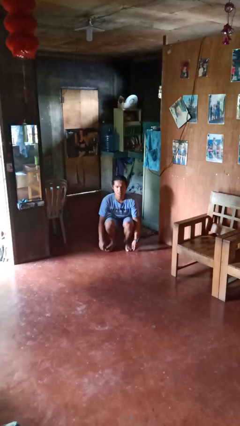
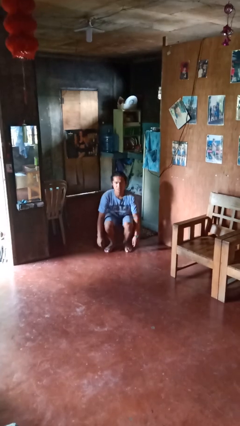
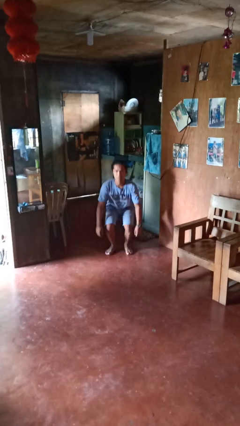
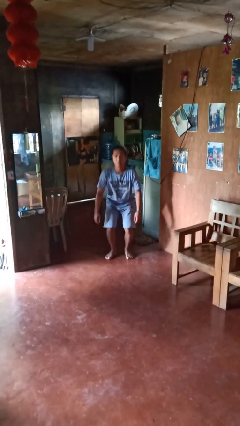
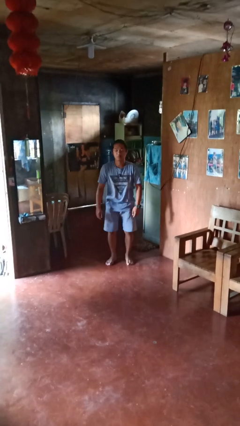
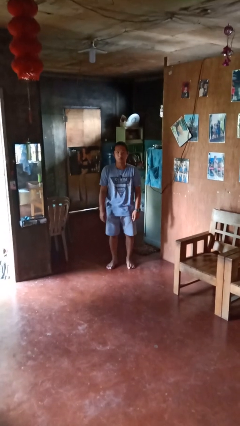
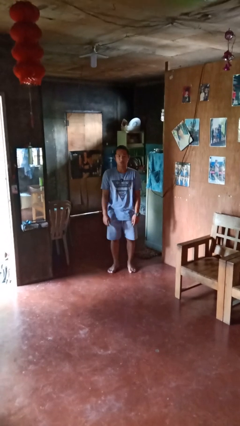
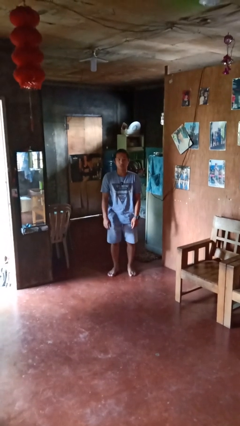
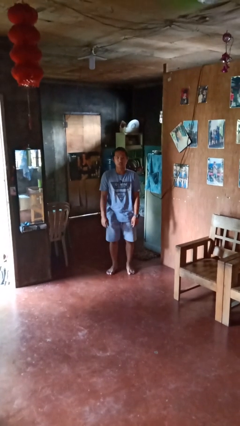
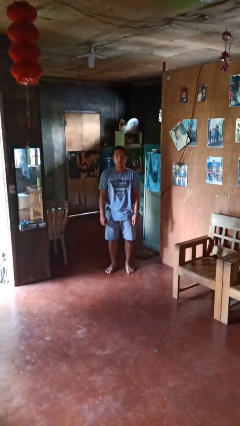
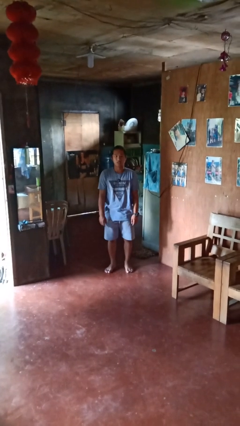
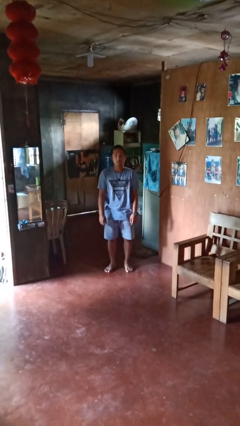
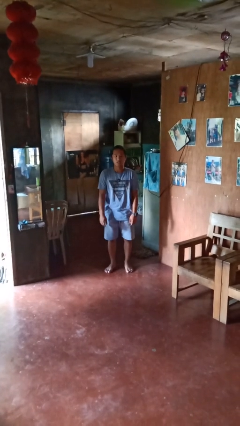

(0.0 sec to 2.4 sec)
person stands up

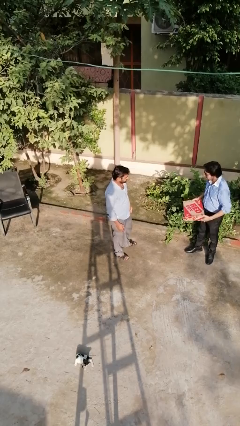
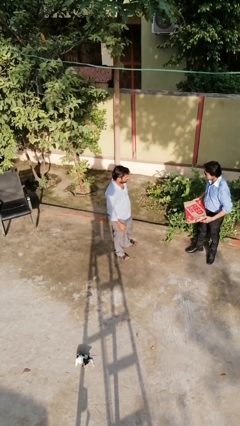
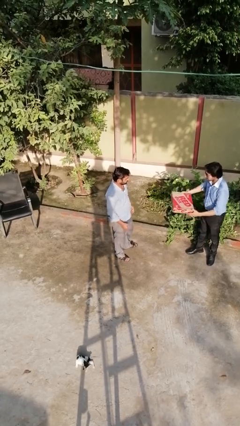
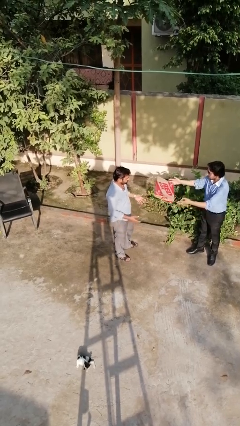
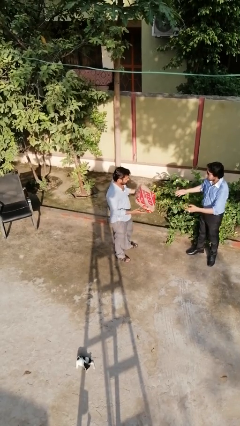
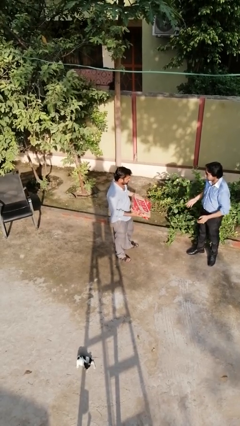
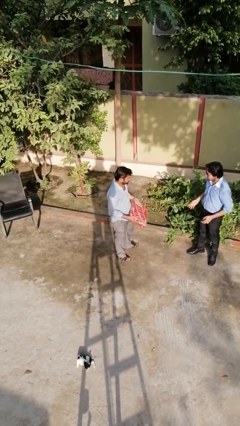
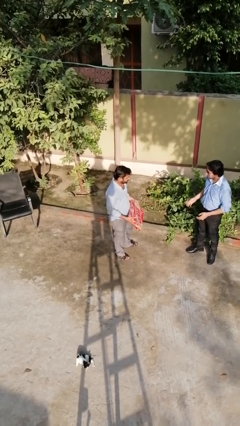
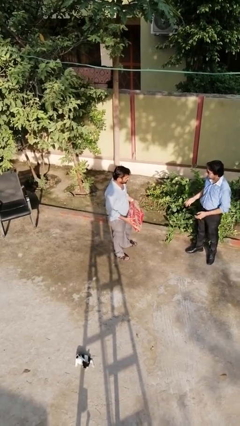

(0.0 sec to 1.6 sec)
person catches object from person

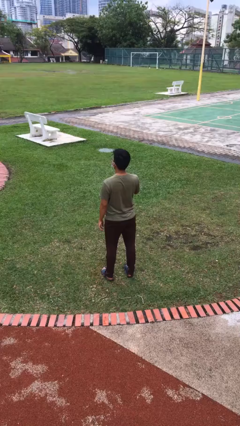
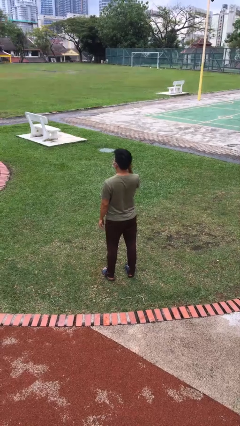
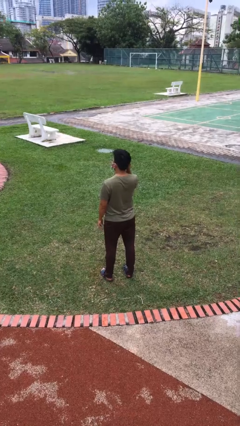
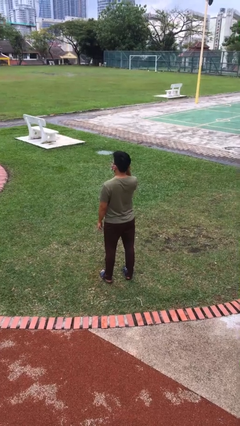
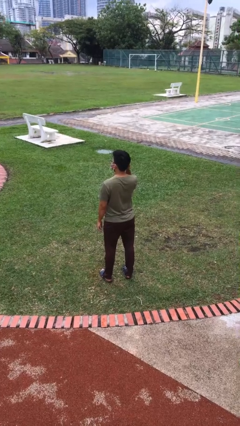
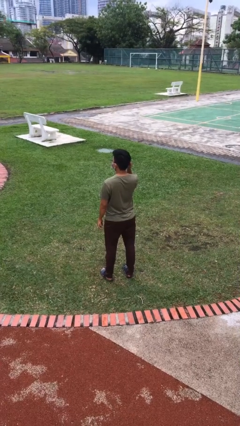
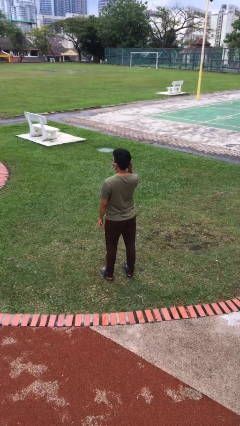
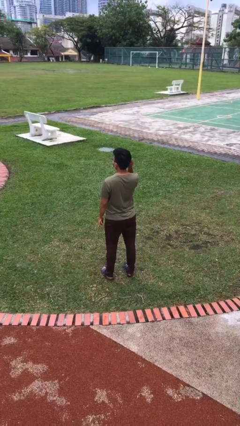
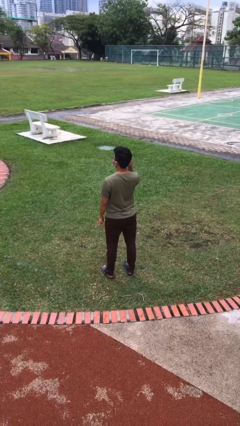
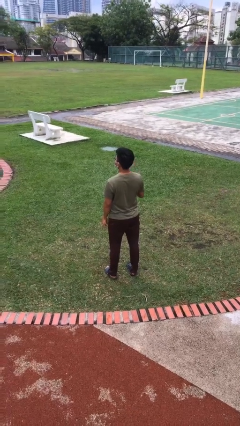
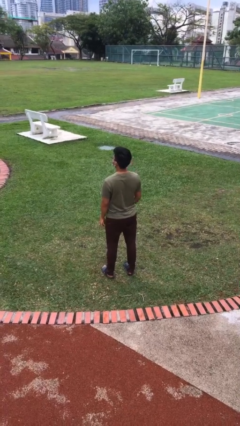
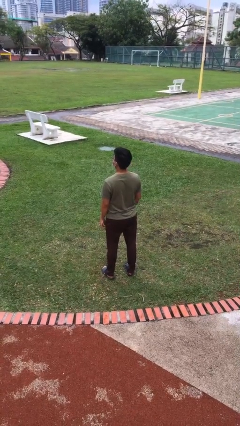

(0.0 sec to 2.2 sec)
person touches earlobe

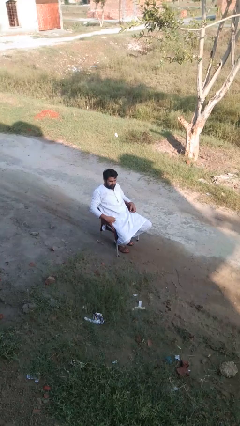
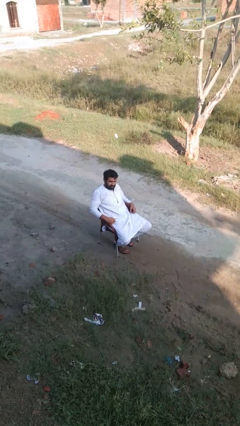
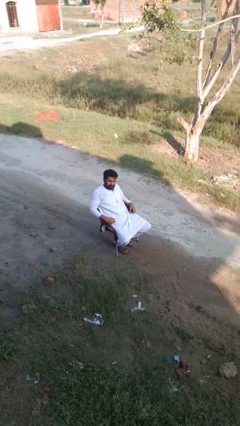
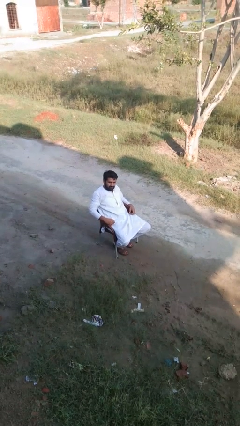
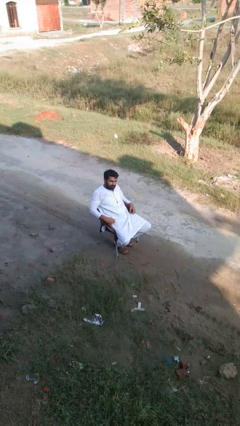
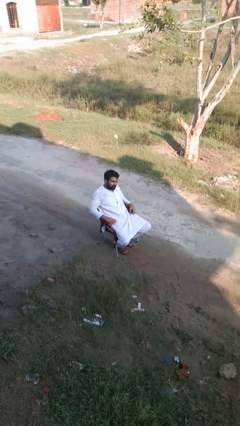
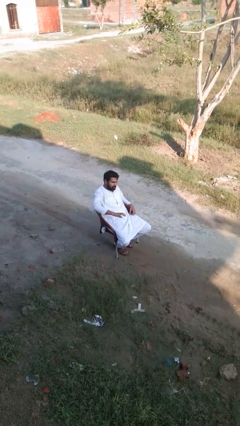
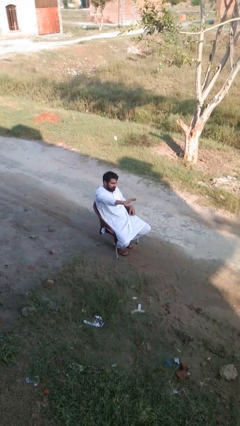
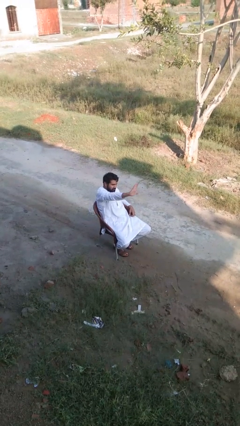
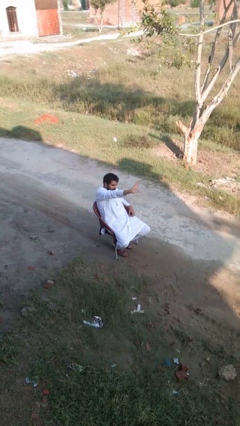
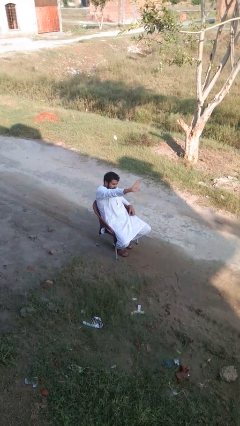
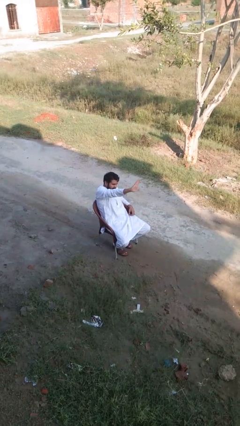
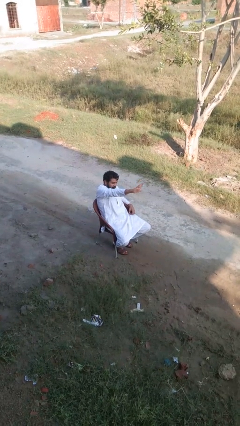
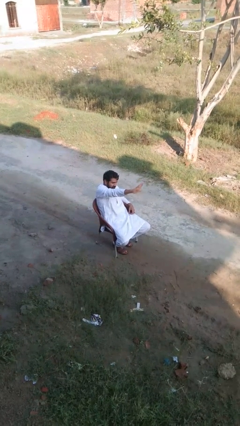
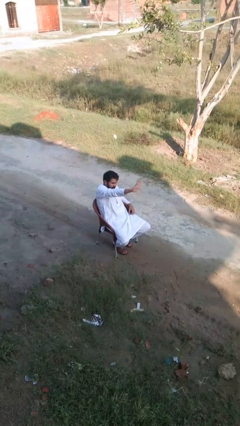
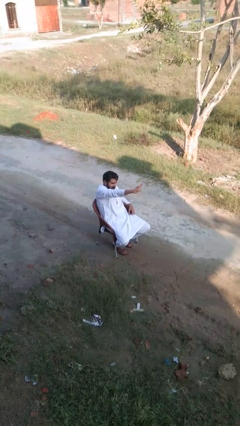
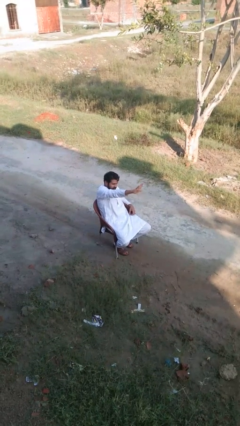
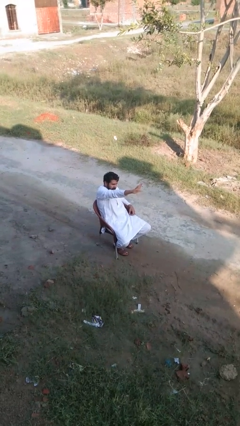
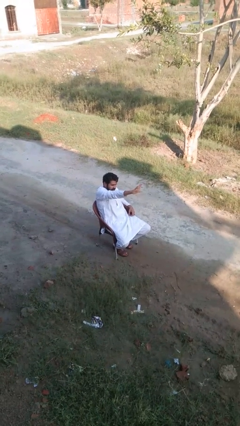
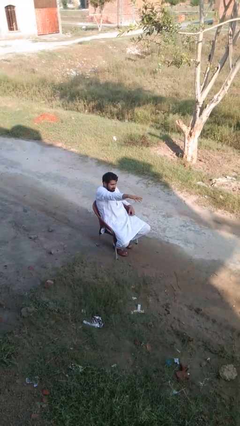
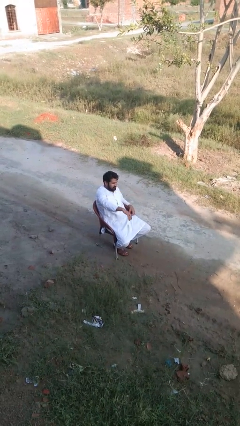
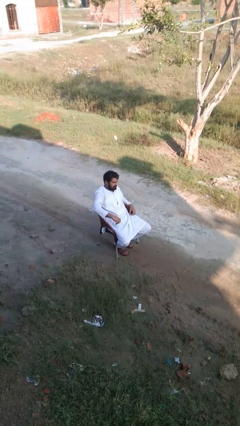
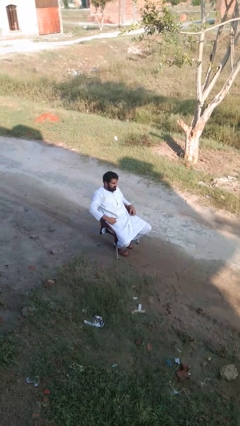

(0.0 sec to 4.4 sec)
person gestures stop

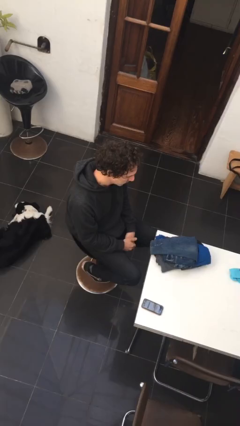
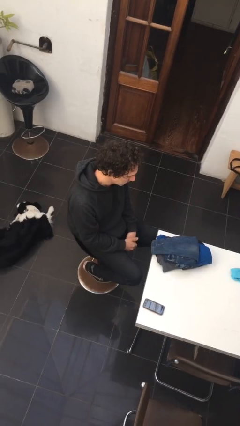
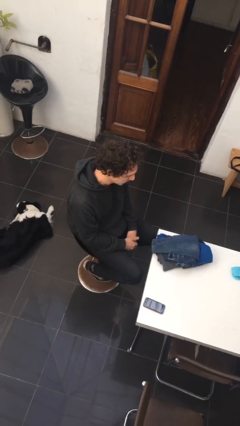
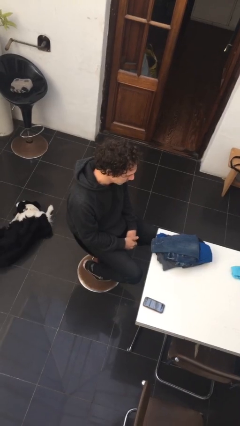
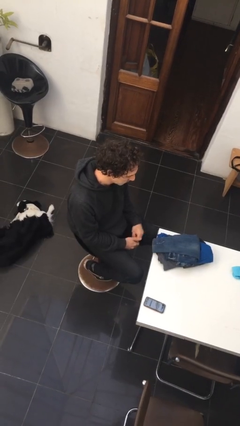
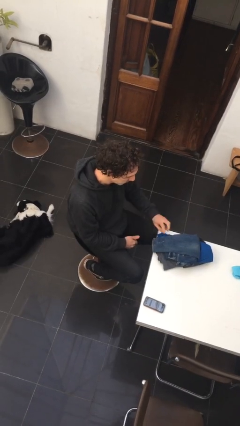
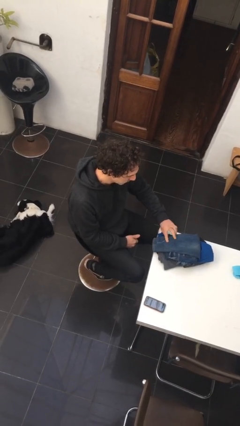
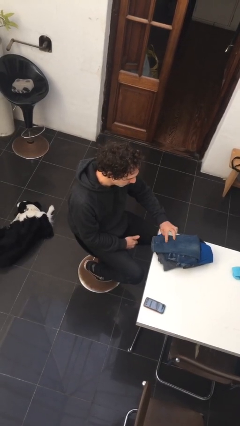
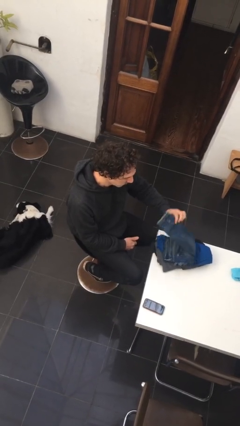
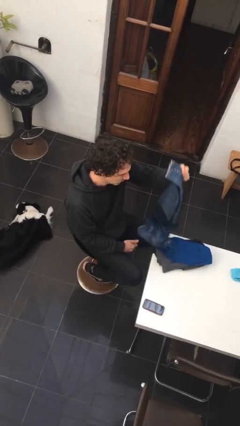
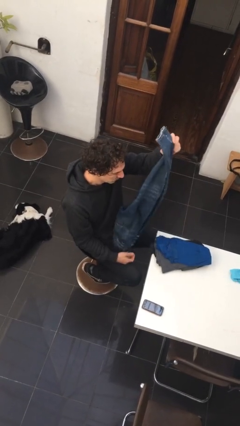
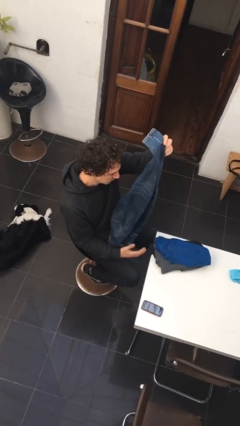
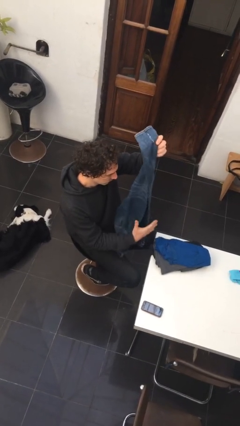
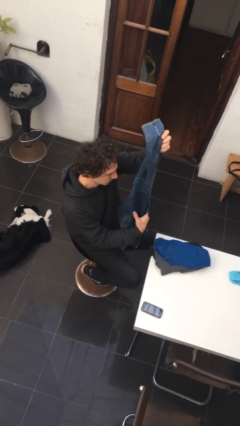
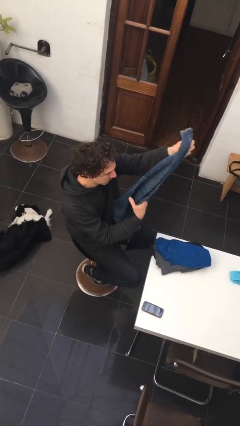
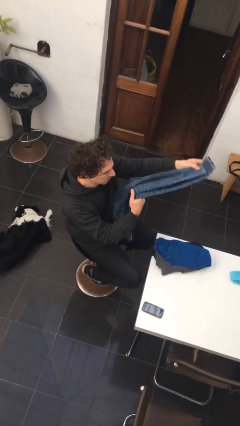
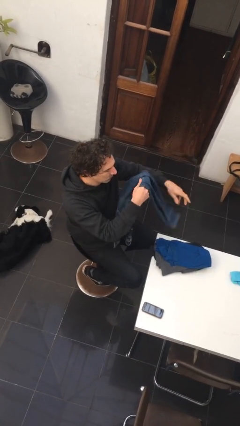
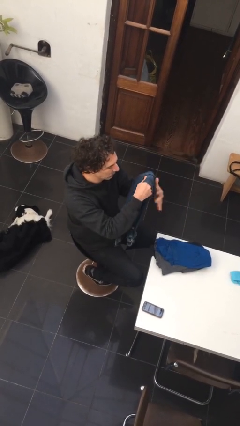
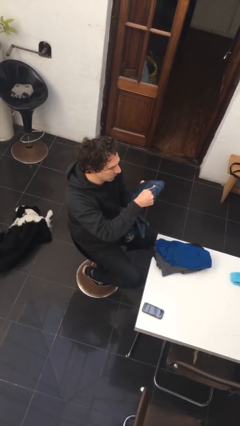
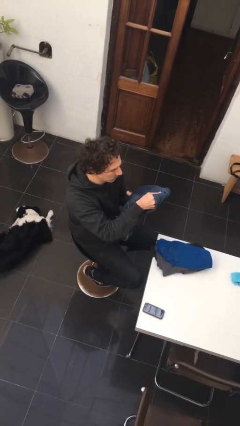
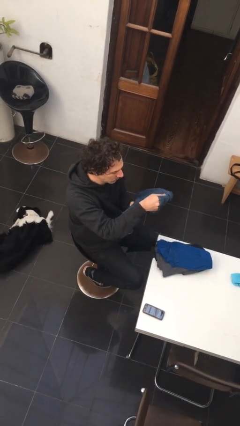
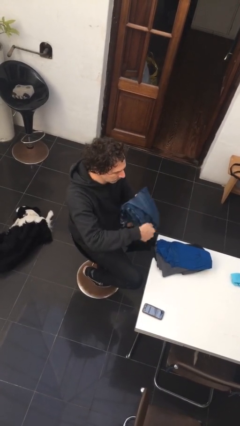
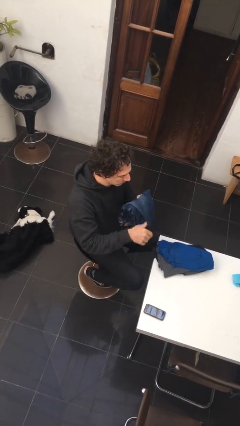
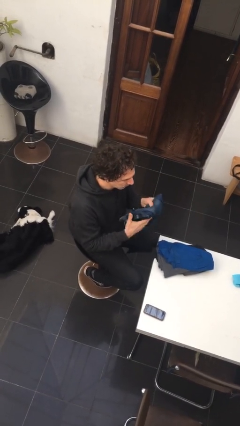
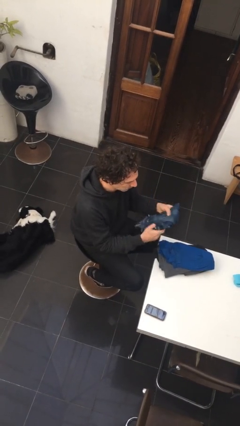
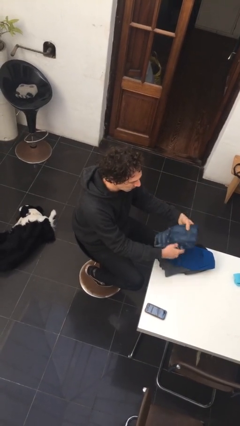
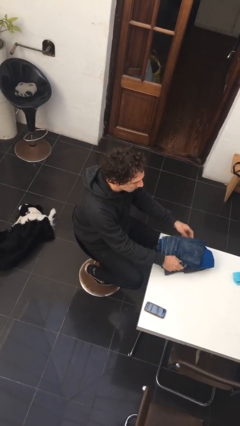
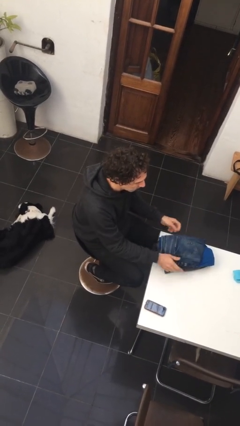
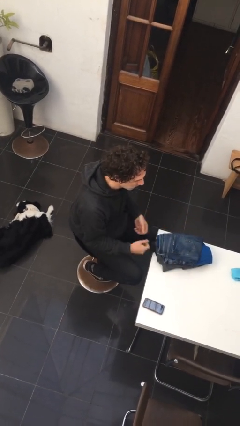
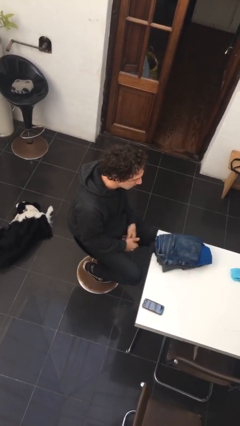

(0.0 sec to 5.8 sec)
person folds pants

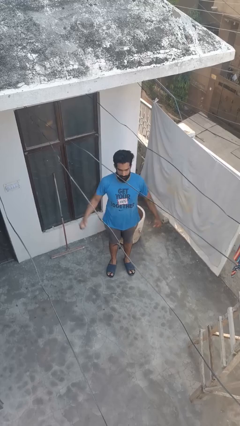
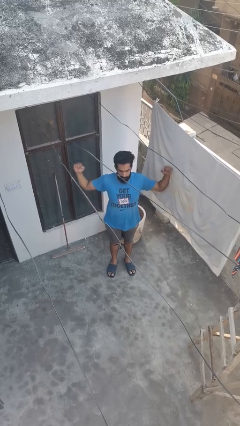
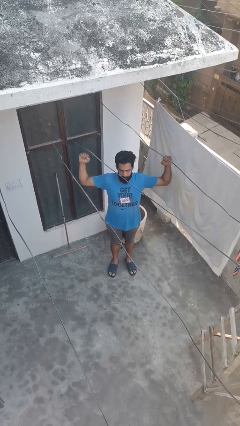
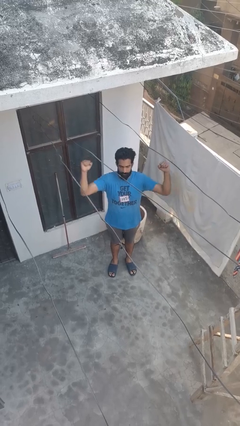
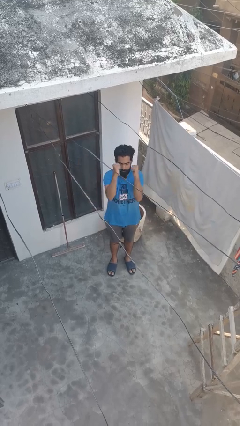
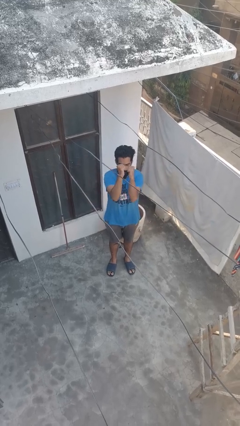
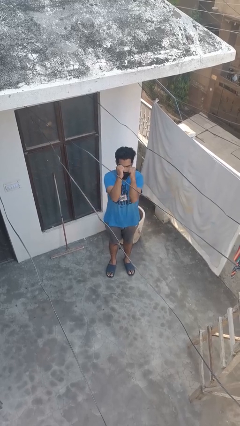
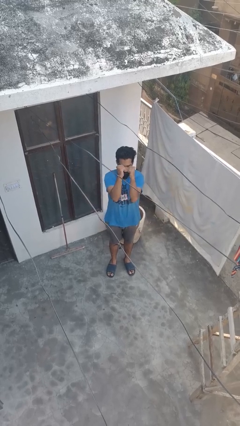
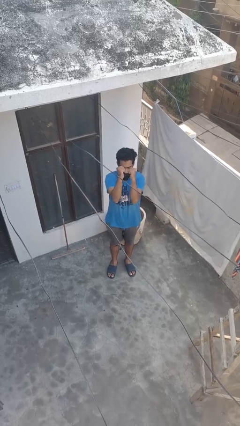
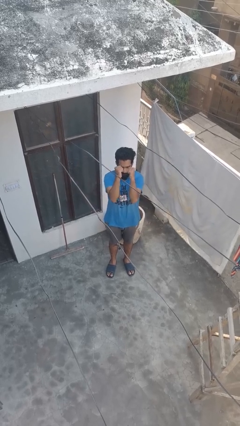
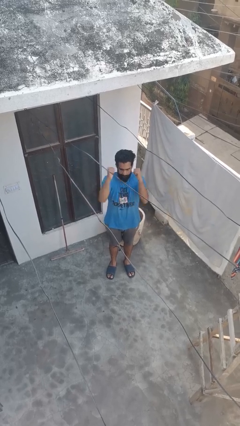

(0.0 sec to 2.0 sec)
person gestures zoom in
